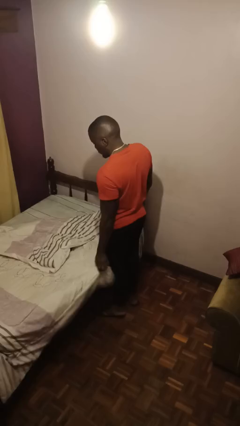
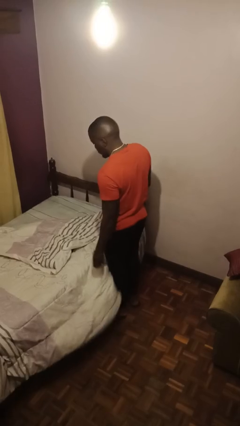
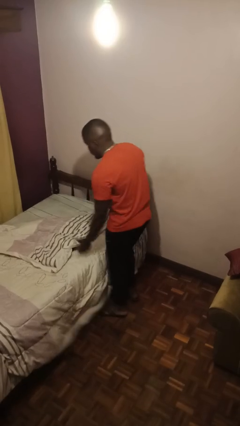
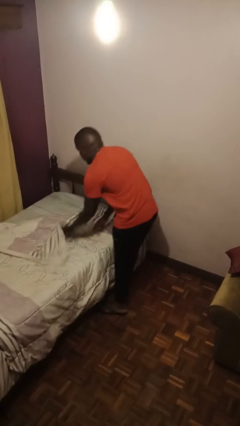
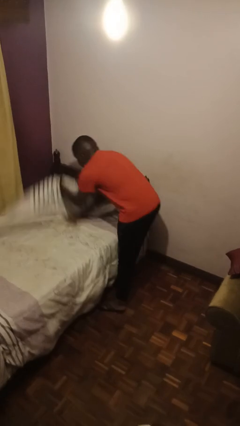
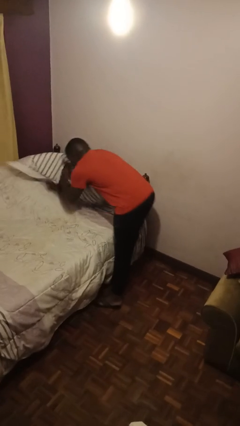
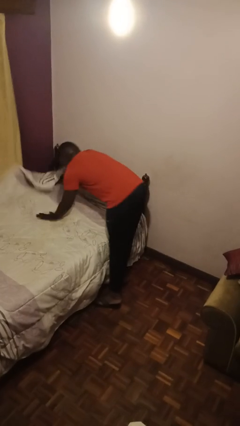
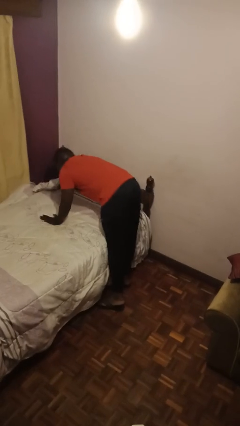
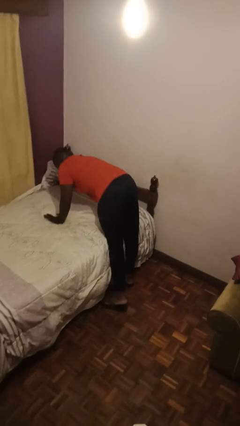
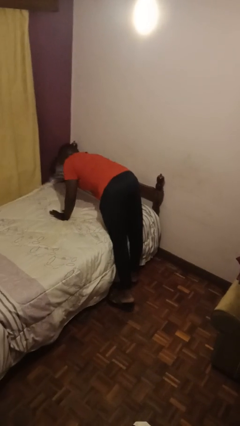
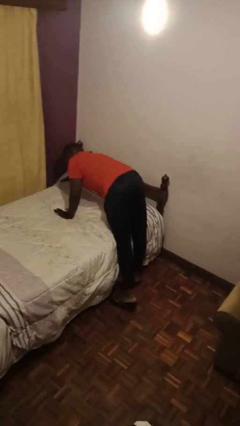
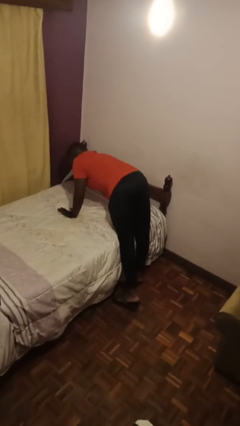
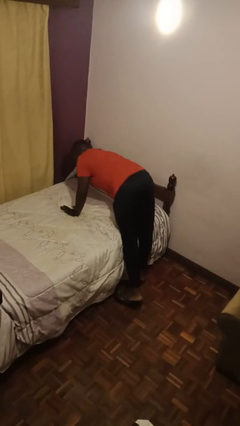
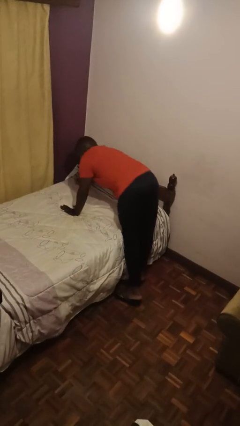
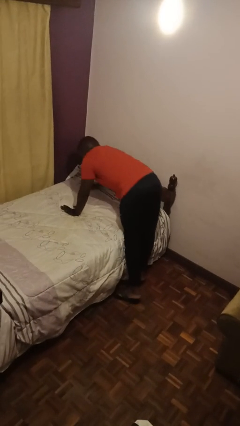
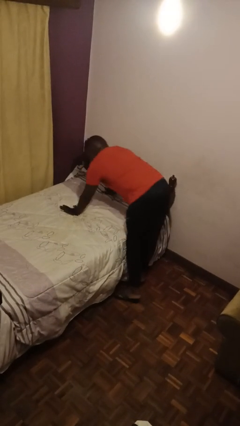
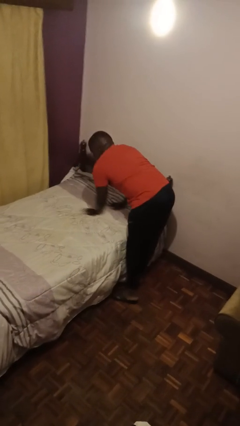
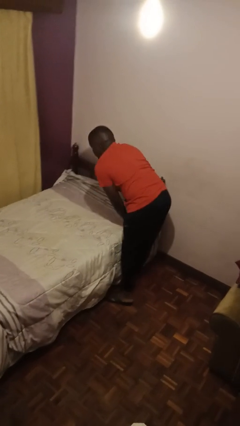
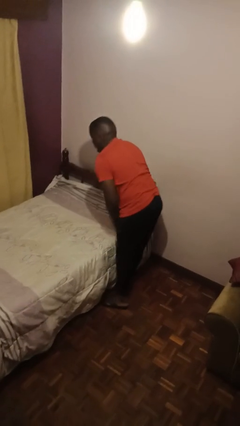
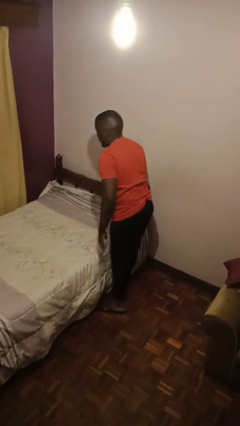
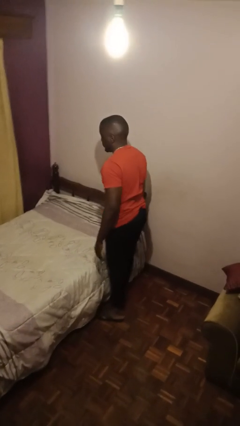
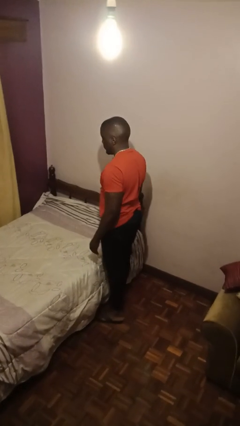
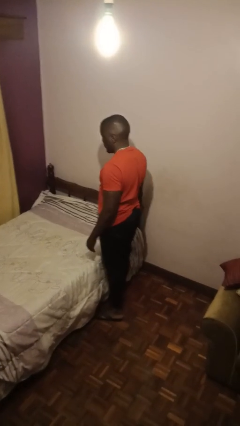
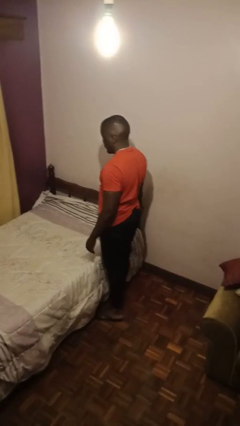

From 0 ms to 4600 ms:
person makes bed

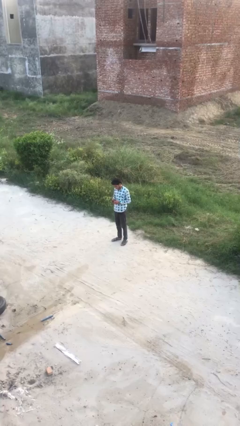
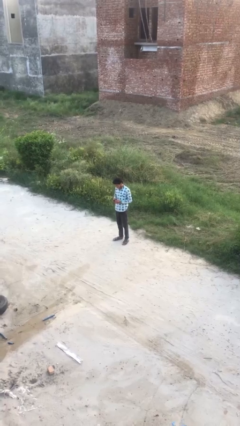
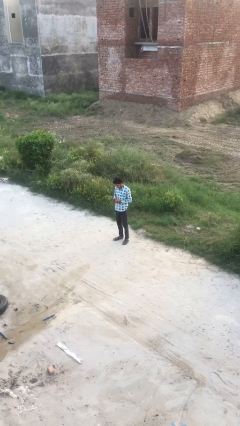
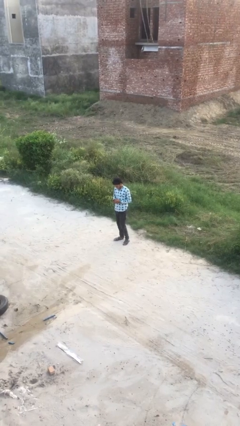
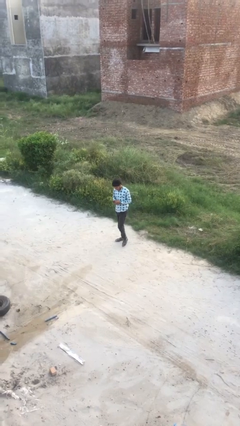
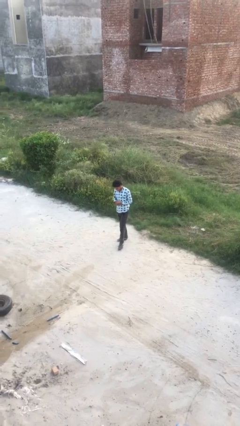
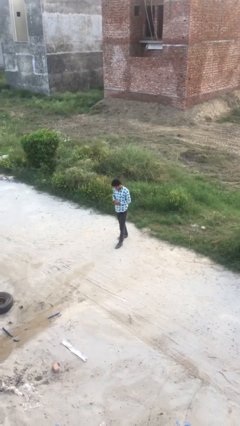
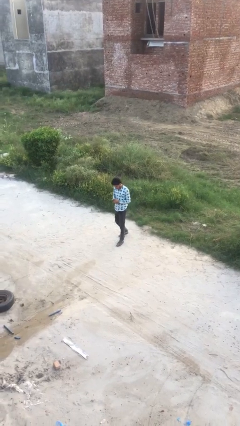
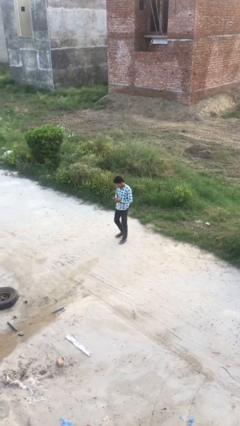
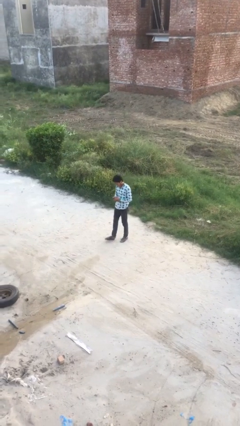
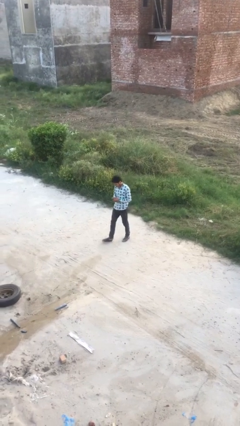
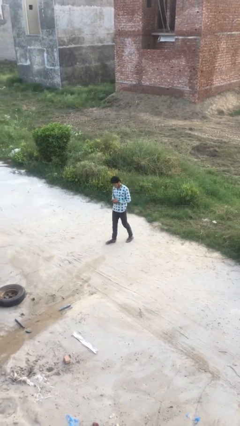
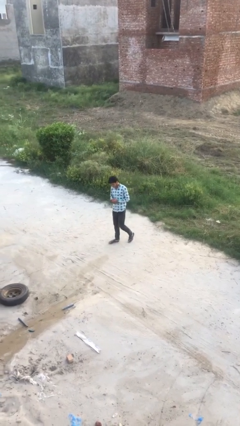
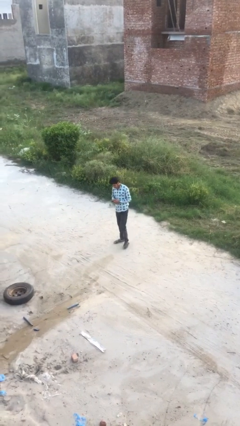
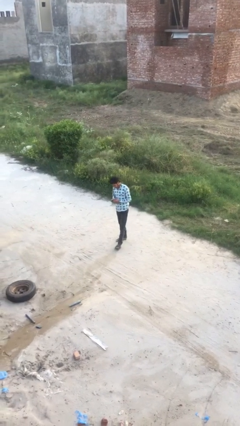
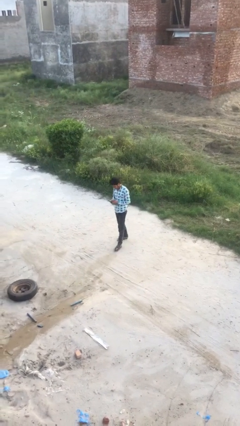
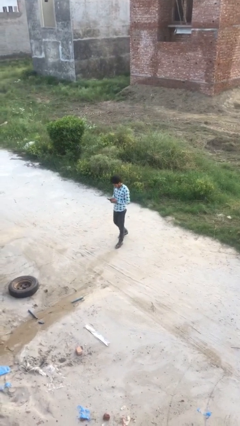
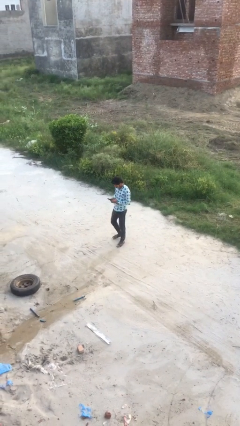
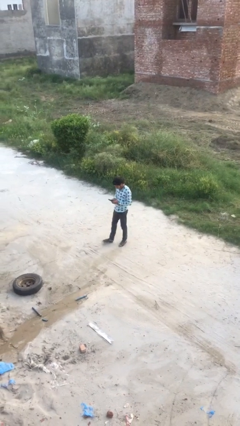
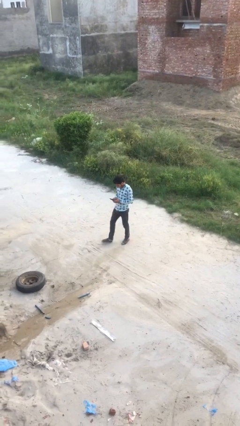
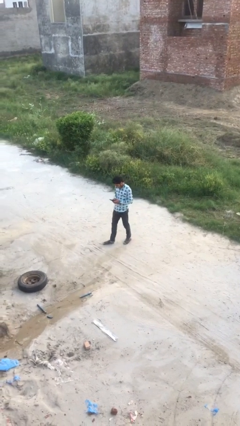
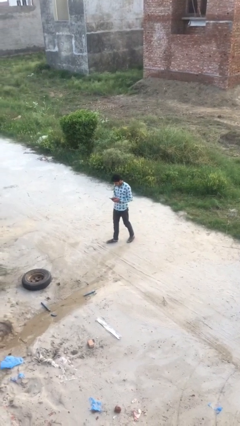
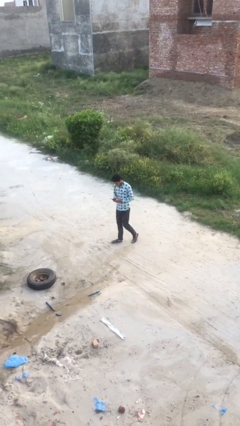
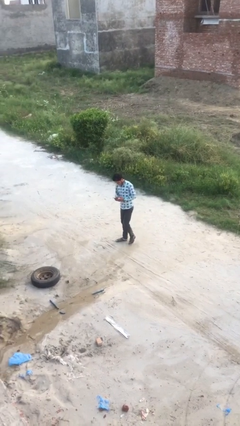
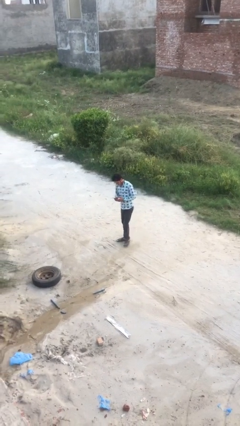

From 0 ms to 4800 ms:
person texts on phone

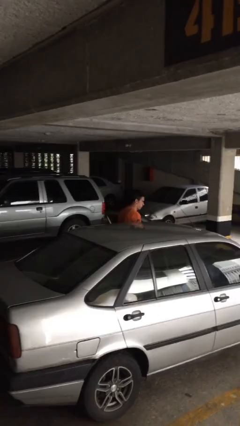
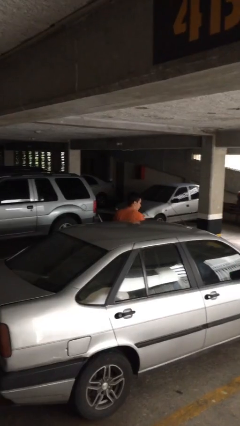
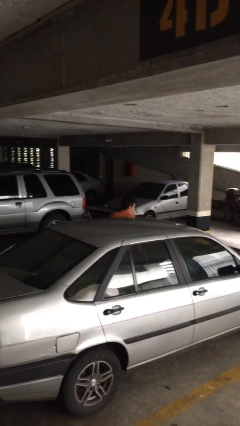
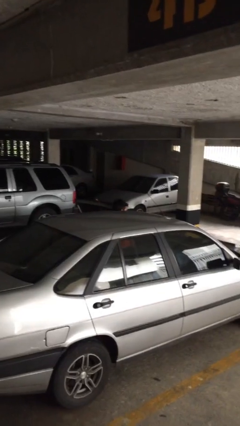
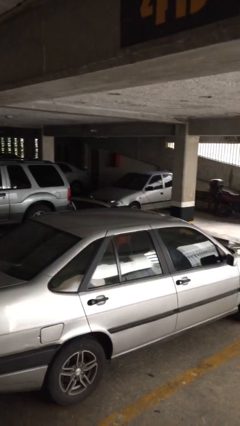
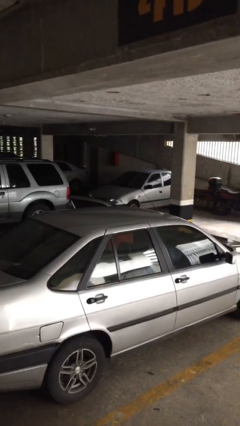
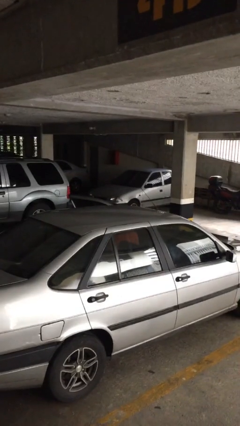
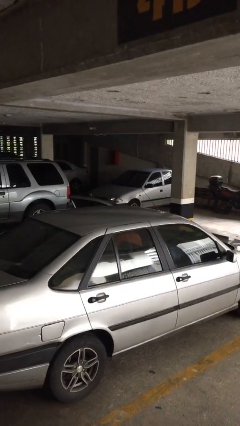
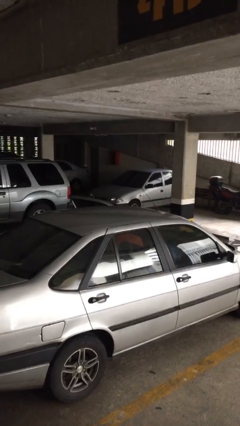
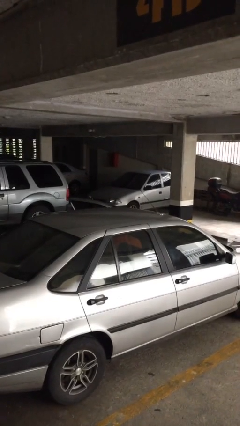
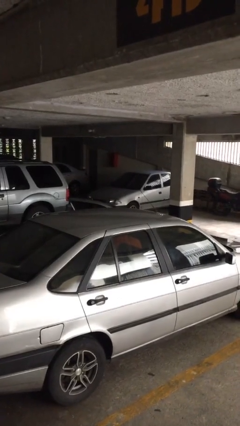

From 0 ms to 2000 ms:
person enters scene through structure

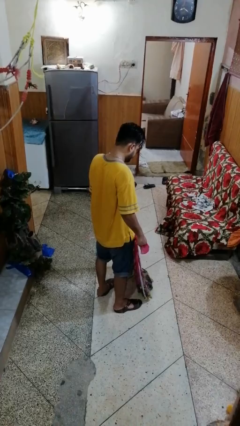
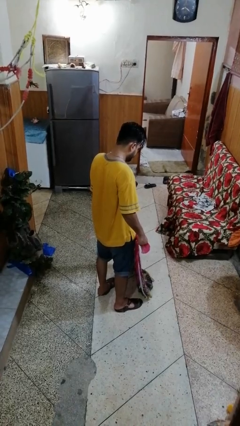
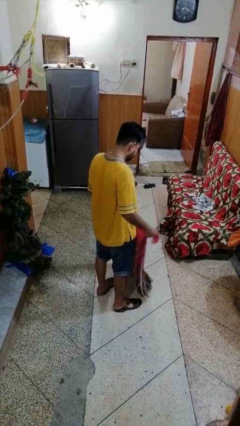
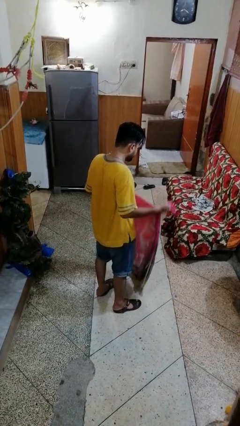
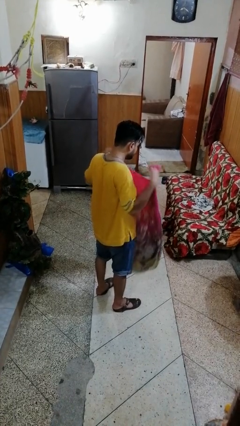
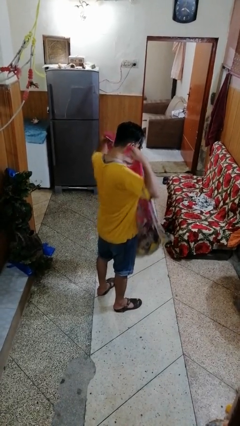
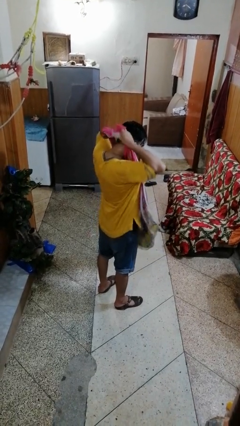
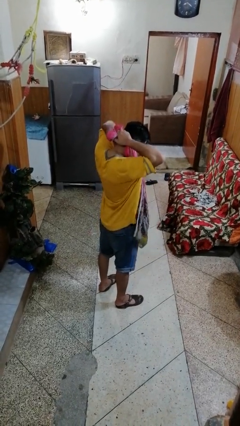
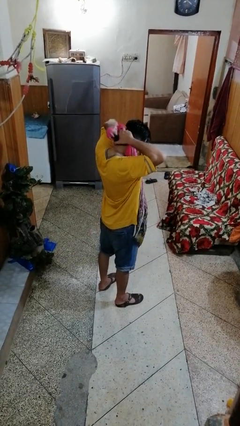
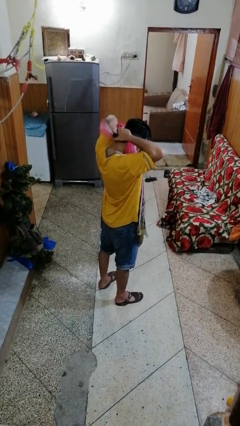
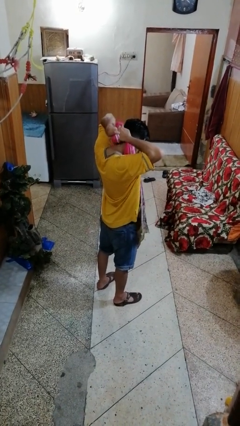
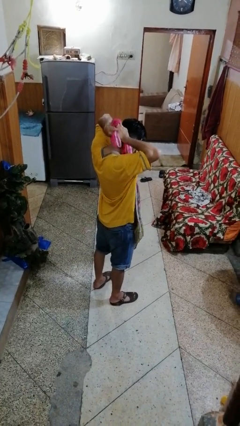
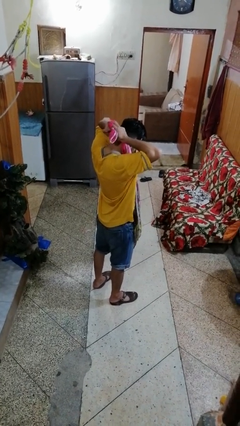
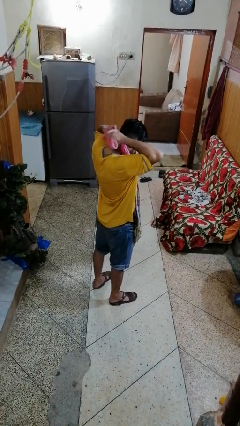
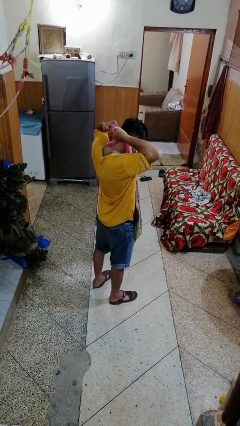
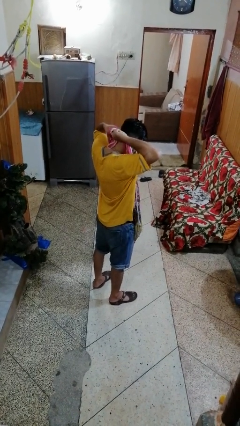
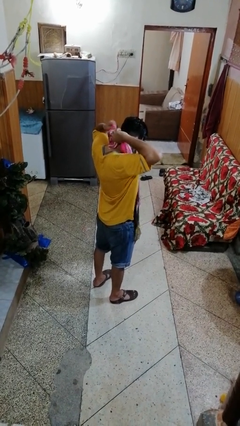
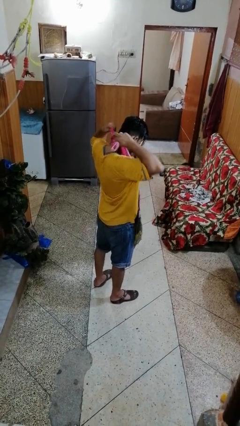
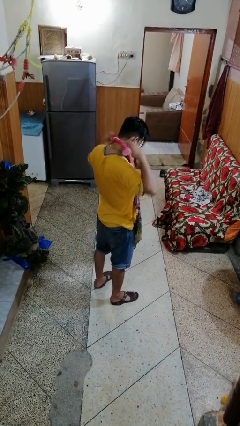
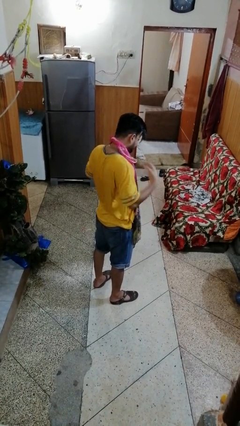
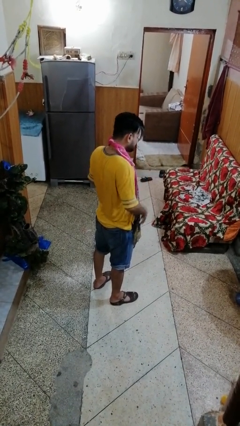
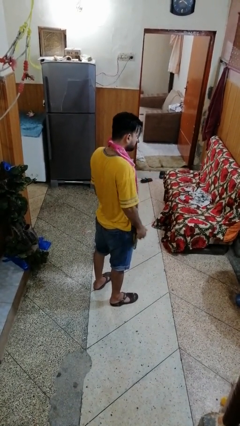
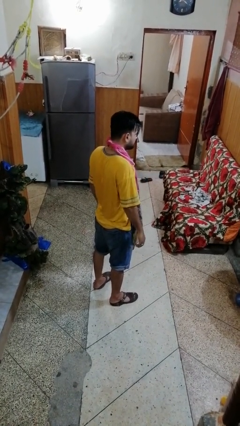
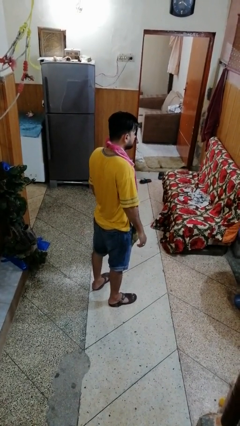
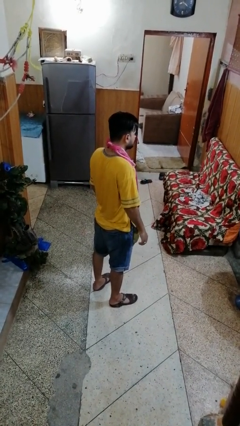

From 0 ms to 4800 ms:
person puts on apron

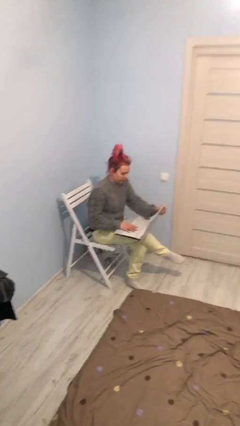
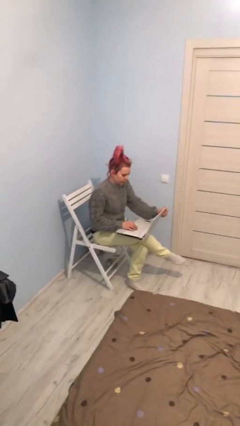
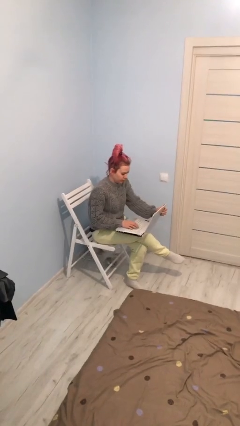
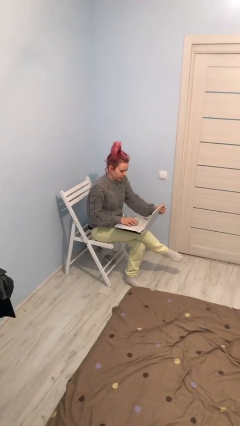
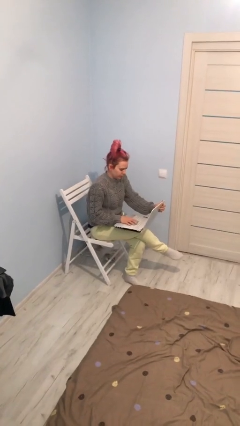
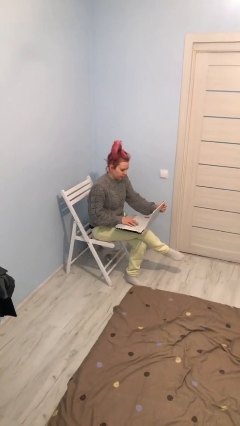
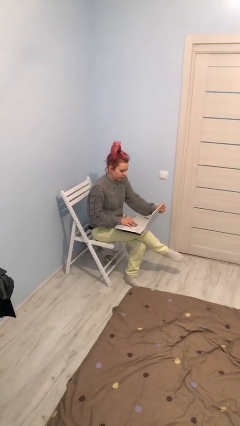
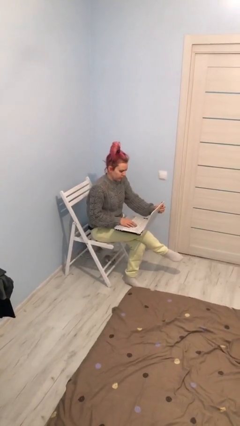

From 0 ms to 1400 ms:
person interacts with laptop

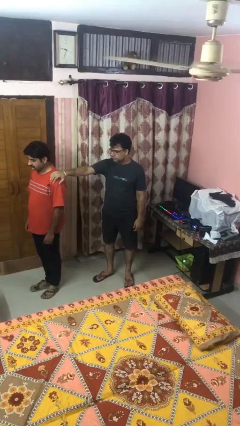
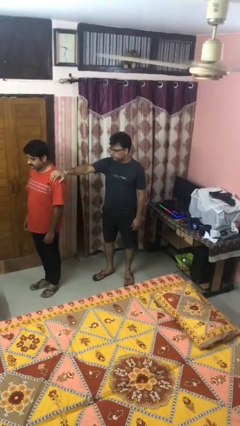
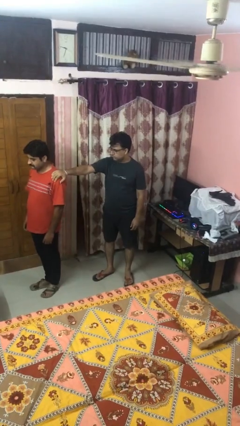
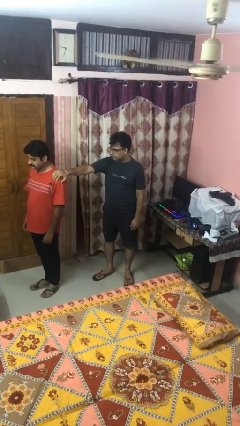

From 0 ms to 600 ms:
person grabs person by shoulder
